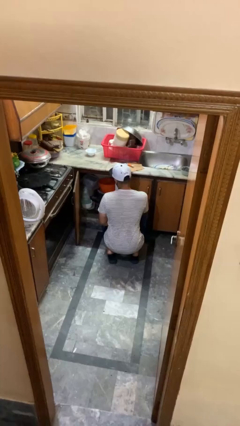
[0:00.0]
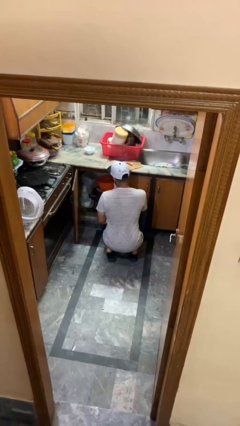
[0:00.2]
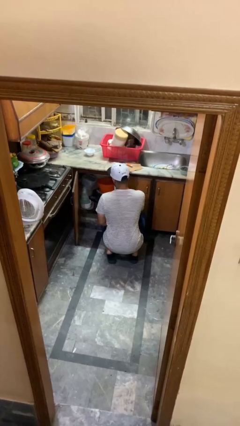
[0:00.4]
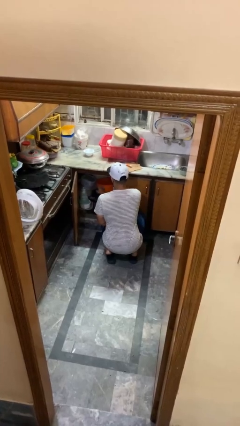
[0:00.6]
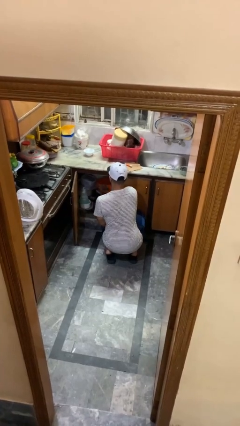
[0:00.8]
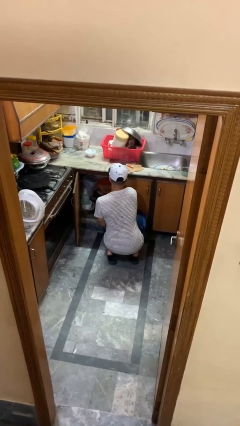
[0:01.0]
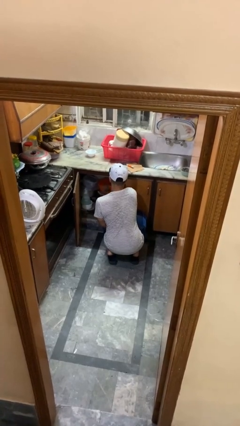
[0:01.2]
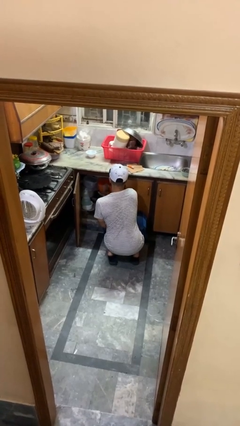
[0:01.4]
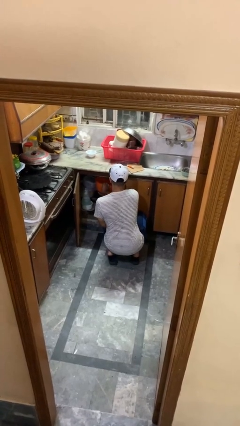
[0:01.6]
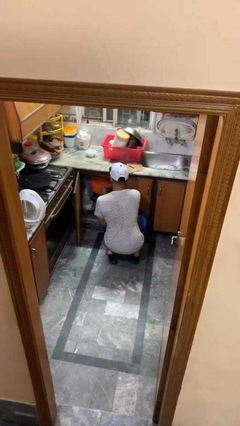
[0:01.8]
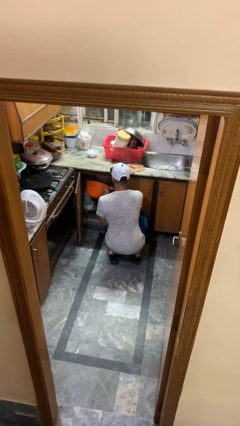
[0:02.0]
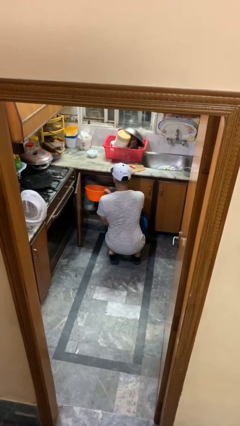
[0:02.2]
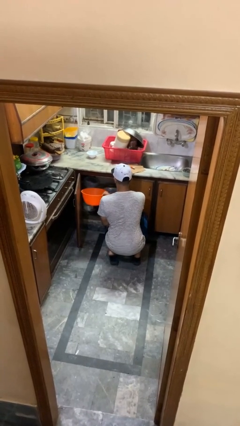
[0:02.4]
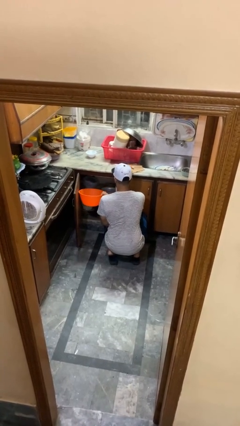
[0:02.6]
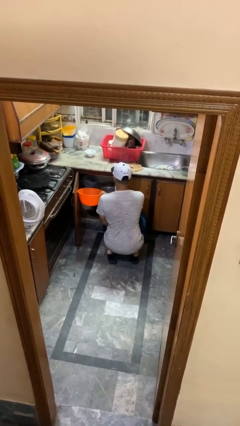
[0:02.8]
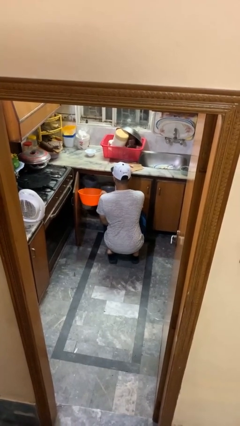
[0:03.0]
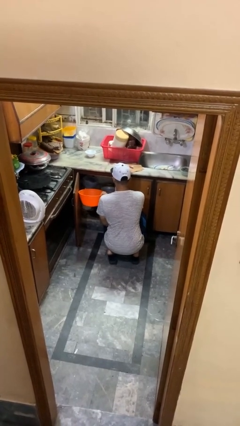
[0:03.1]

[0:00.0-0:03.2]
person takes object from kitchen drawer

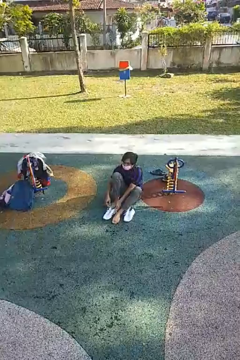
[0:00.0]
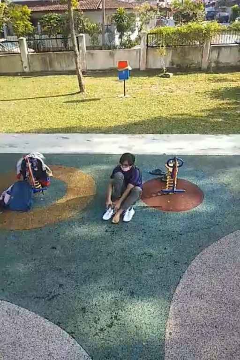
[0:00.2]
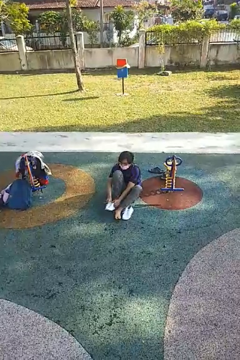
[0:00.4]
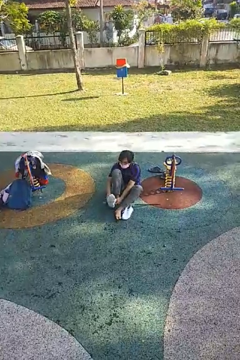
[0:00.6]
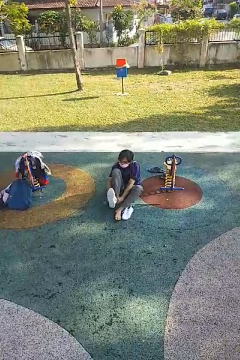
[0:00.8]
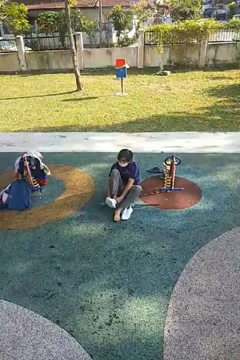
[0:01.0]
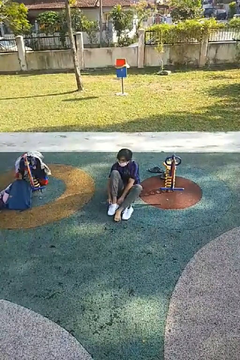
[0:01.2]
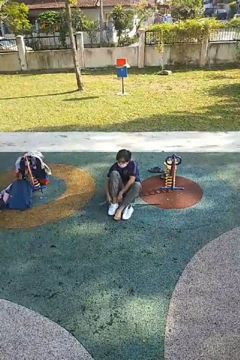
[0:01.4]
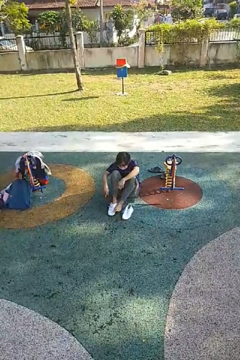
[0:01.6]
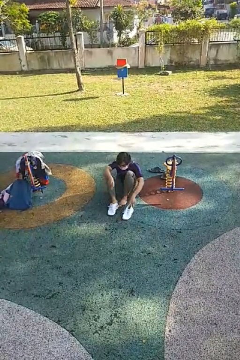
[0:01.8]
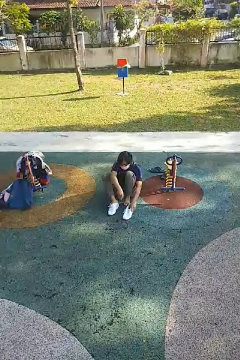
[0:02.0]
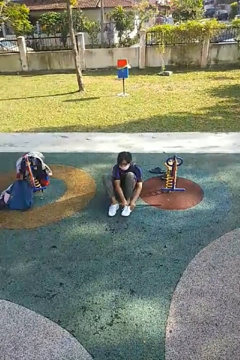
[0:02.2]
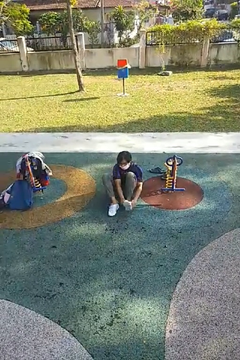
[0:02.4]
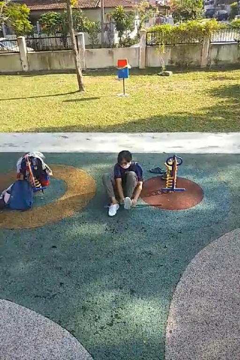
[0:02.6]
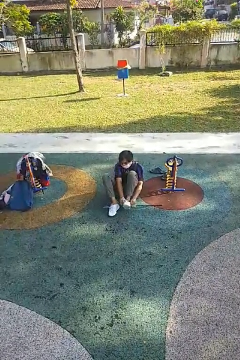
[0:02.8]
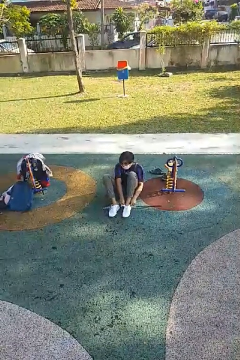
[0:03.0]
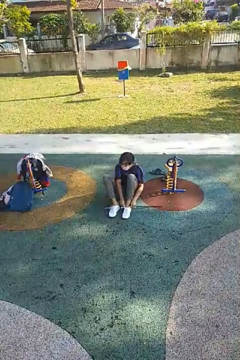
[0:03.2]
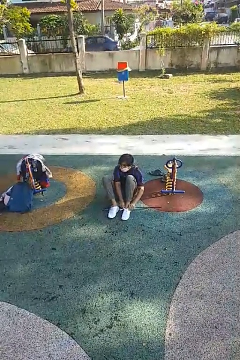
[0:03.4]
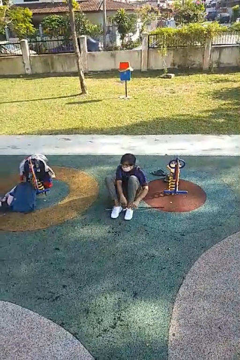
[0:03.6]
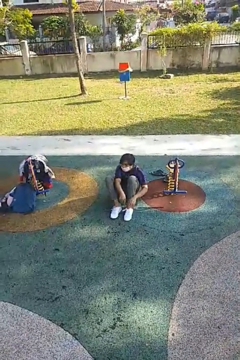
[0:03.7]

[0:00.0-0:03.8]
person puts on shoes

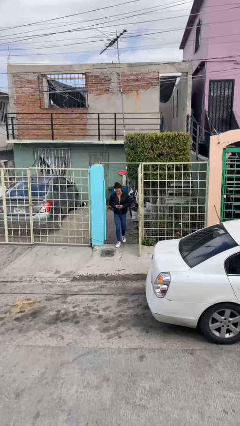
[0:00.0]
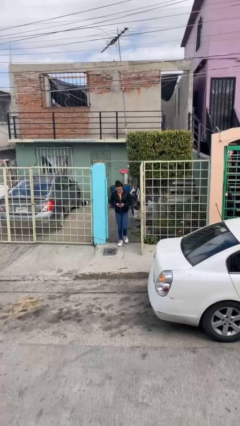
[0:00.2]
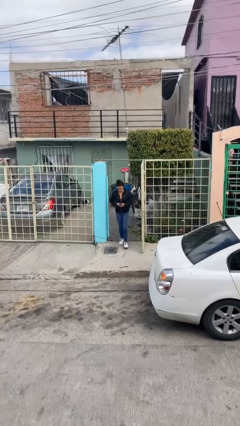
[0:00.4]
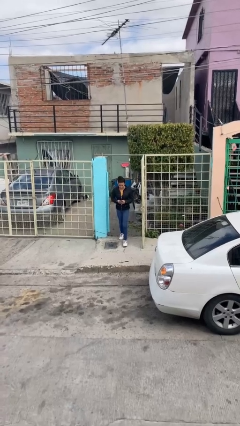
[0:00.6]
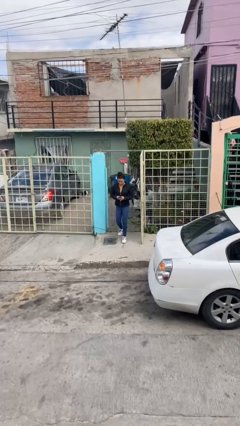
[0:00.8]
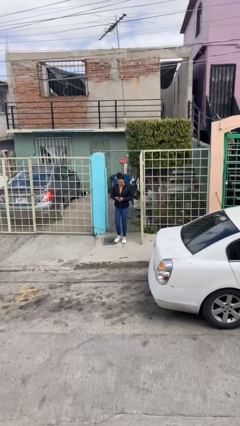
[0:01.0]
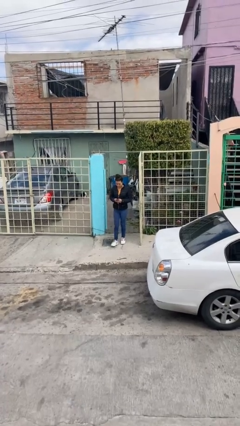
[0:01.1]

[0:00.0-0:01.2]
person enters scene through structure

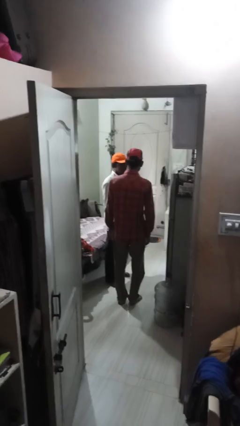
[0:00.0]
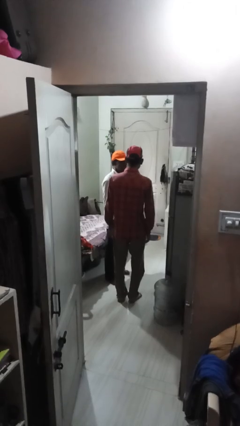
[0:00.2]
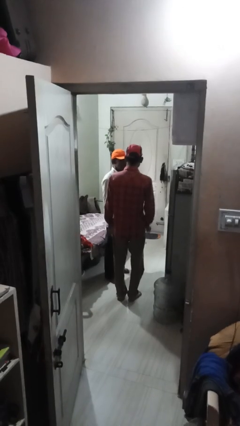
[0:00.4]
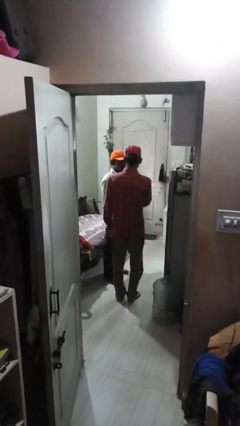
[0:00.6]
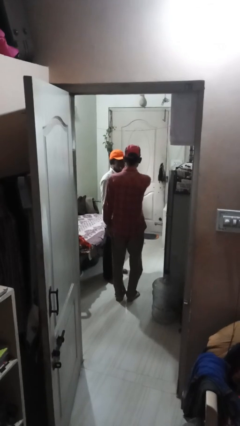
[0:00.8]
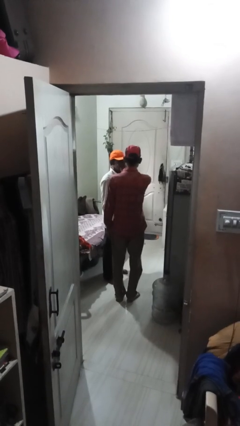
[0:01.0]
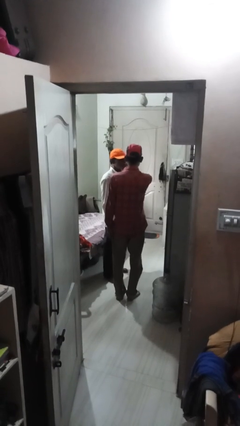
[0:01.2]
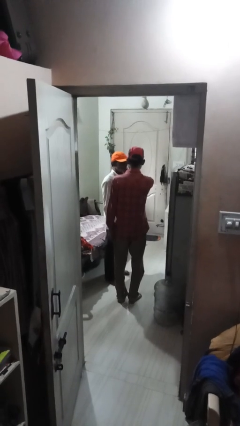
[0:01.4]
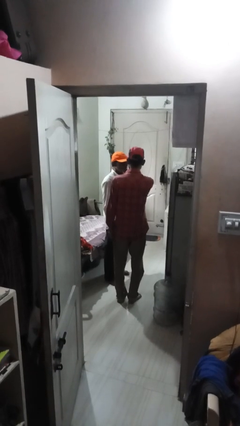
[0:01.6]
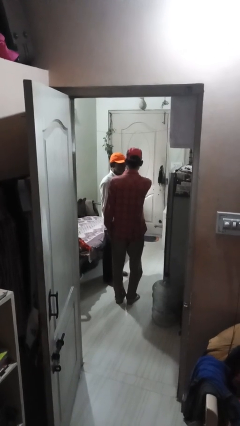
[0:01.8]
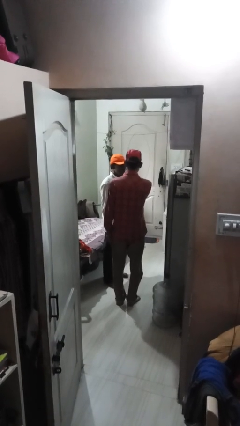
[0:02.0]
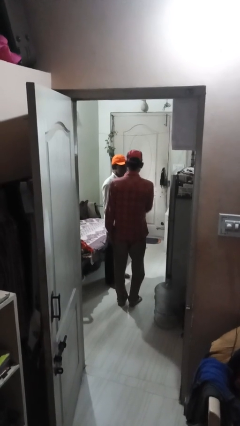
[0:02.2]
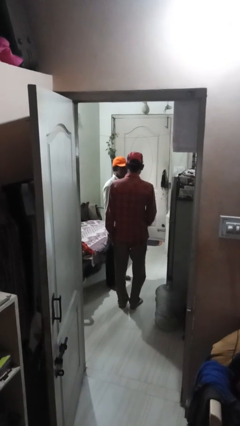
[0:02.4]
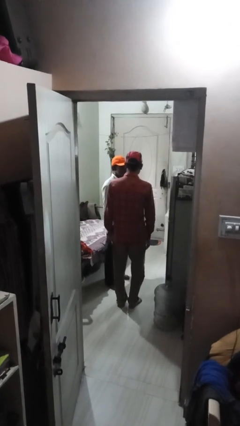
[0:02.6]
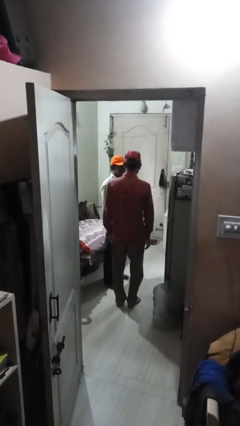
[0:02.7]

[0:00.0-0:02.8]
person touches face of person

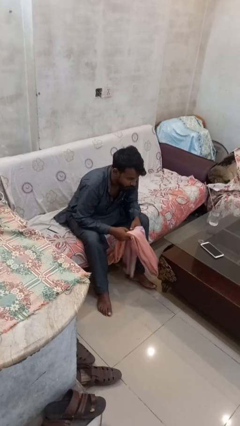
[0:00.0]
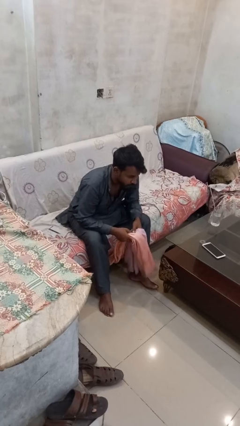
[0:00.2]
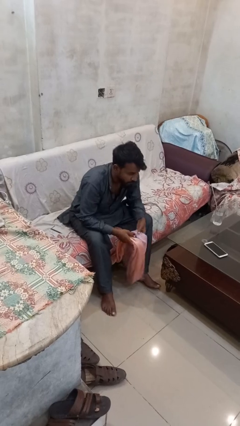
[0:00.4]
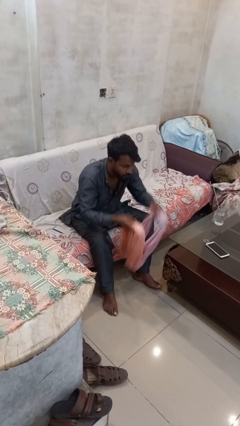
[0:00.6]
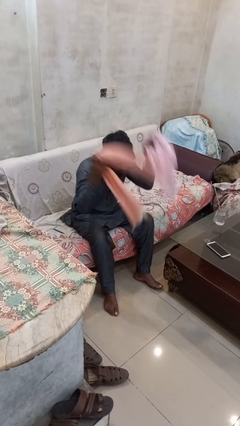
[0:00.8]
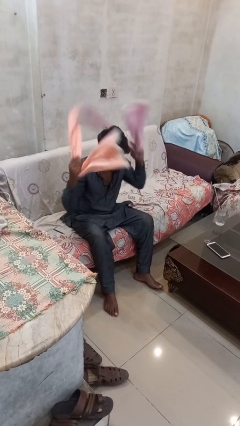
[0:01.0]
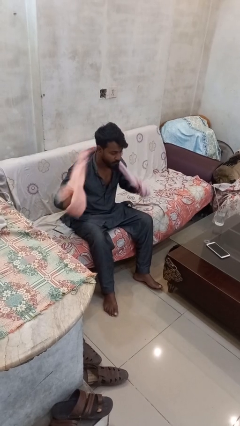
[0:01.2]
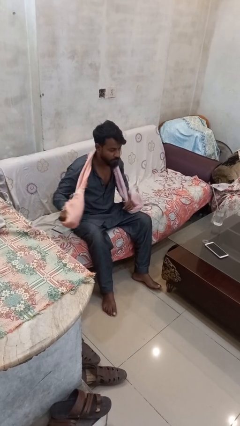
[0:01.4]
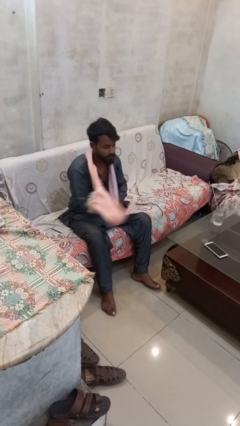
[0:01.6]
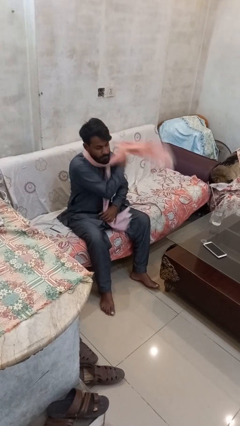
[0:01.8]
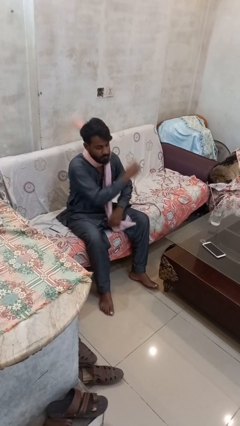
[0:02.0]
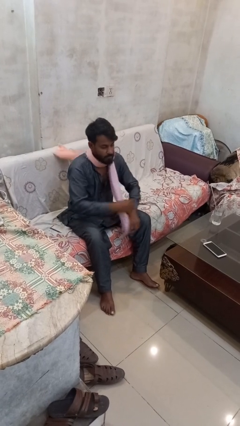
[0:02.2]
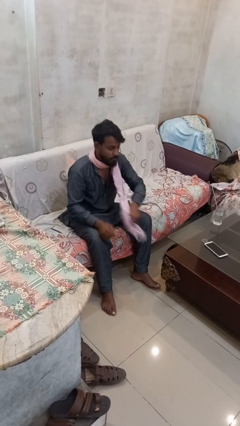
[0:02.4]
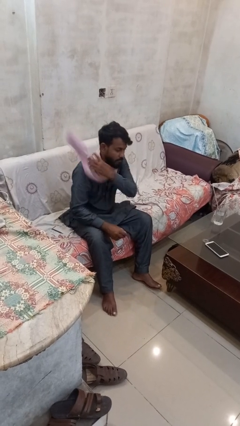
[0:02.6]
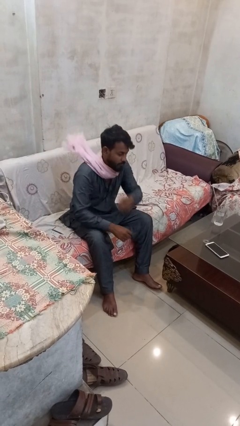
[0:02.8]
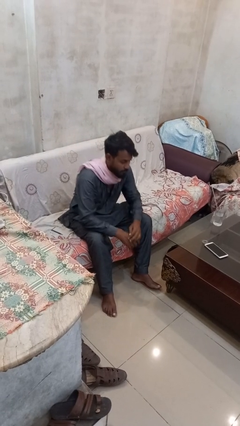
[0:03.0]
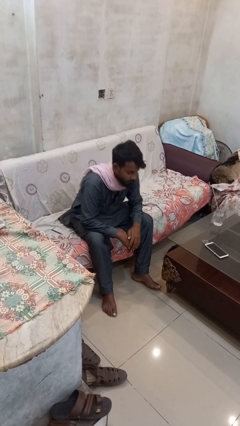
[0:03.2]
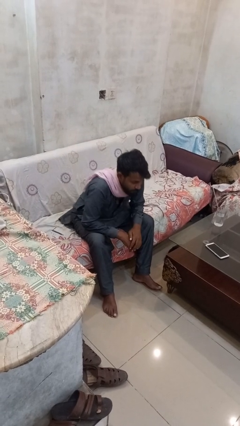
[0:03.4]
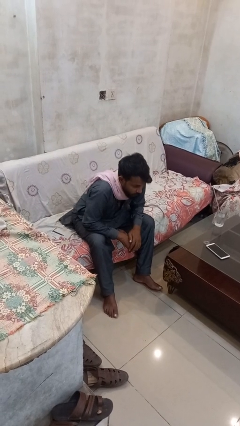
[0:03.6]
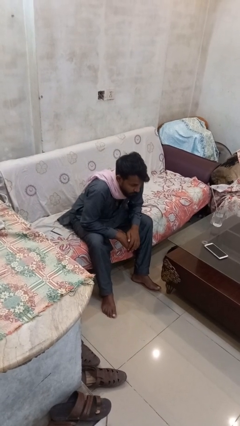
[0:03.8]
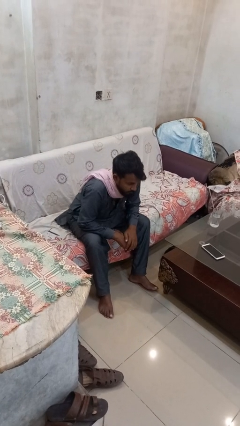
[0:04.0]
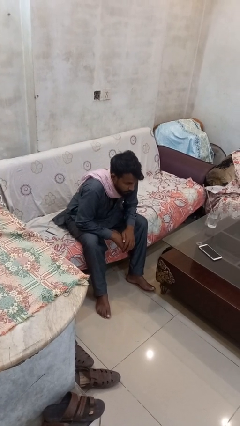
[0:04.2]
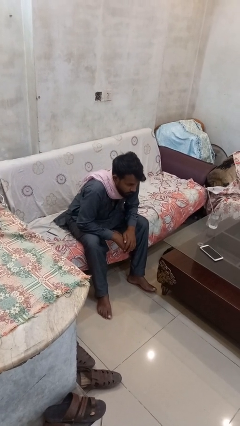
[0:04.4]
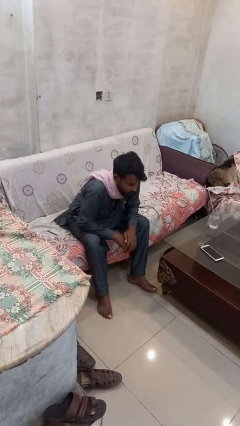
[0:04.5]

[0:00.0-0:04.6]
person puts on scarf

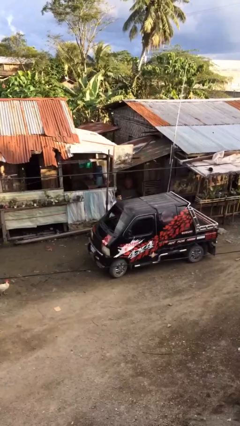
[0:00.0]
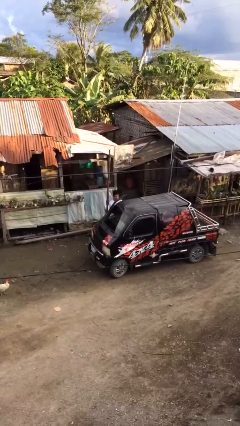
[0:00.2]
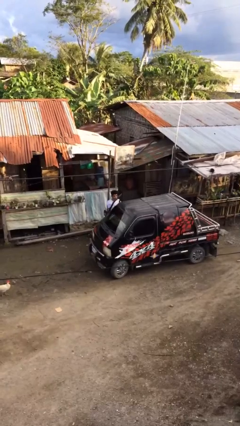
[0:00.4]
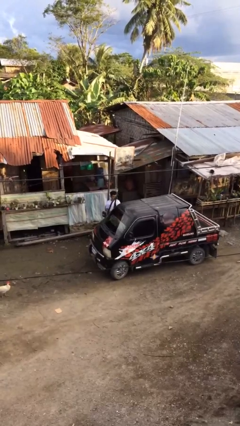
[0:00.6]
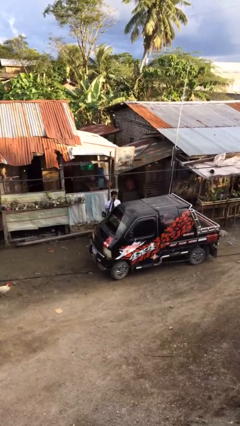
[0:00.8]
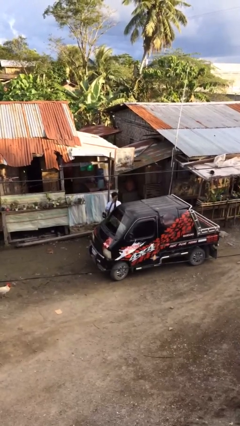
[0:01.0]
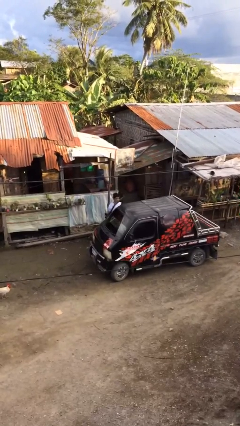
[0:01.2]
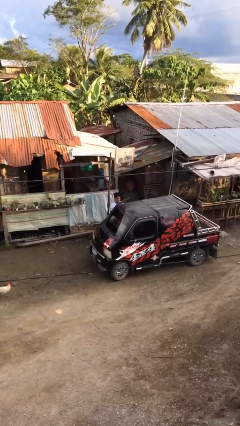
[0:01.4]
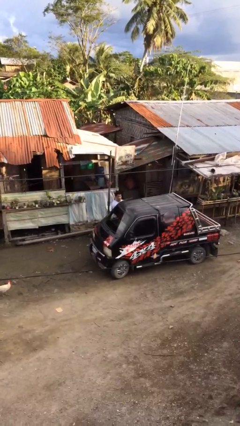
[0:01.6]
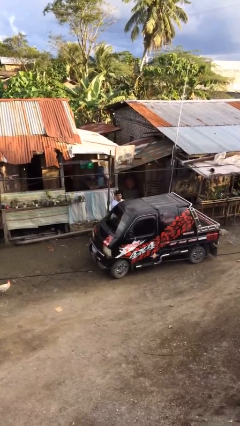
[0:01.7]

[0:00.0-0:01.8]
person opens car door

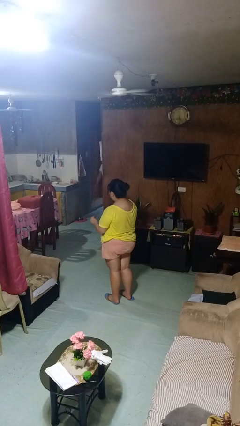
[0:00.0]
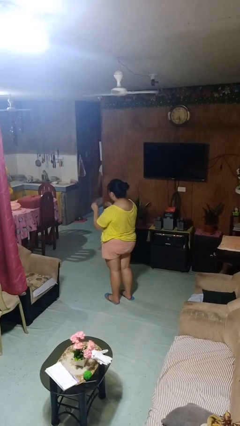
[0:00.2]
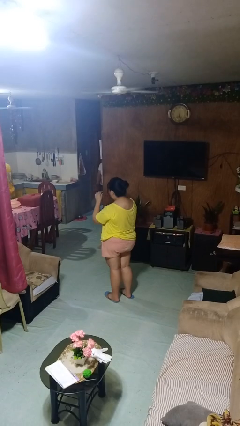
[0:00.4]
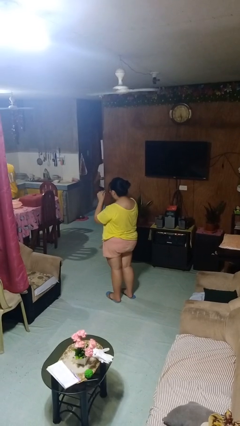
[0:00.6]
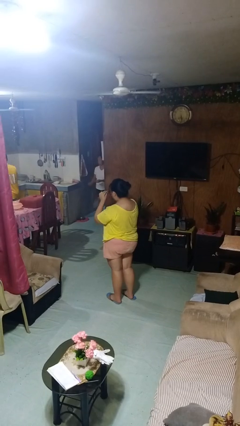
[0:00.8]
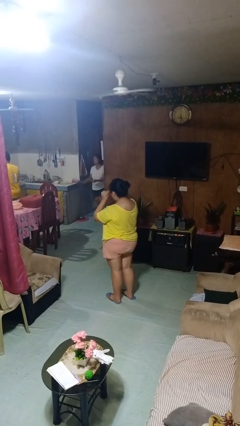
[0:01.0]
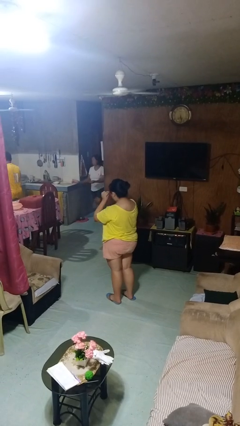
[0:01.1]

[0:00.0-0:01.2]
person puts on glasses
